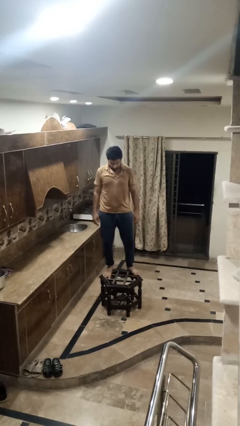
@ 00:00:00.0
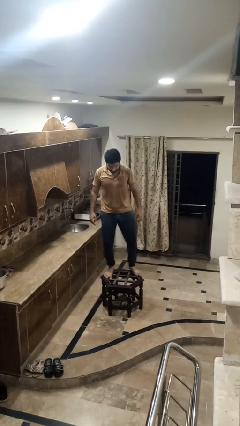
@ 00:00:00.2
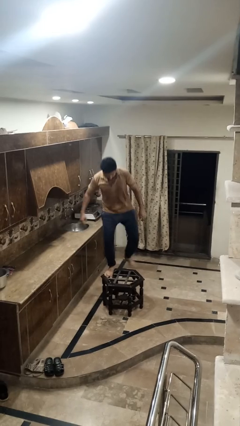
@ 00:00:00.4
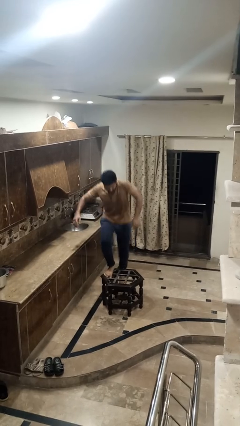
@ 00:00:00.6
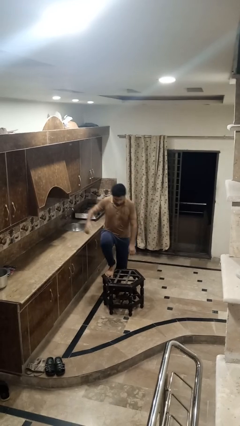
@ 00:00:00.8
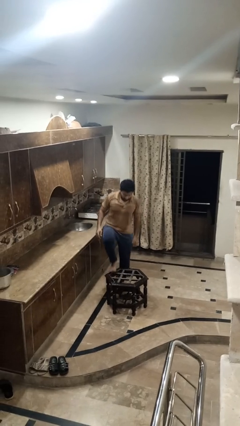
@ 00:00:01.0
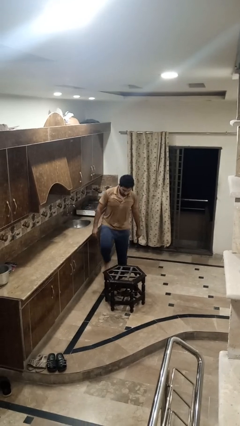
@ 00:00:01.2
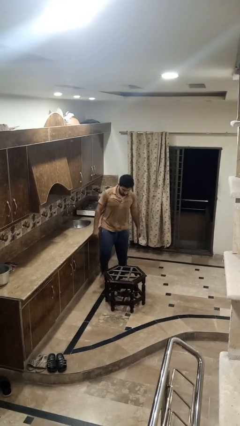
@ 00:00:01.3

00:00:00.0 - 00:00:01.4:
person climbs off table

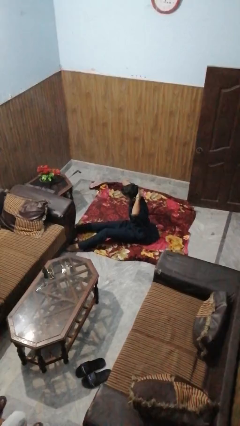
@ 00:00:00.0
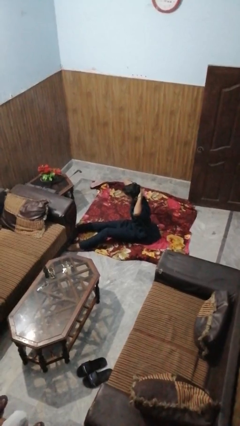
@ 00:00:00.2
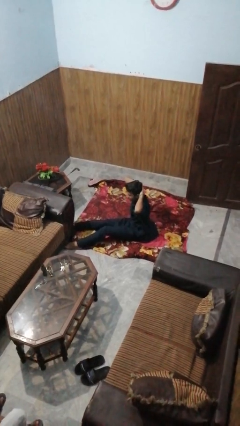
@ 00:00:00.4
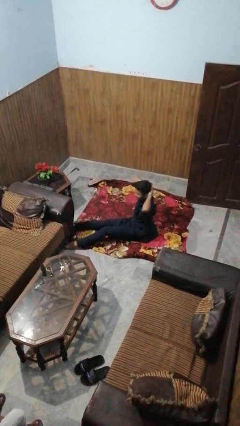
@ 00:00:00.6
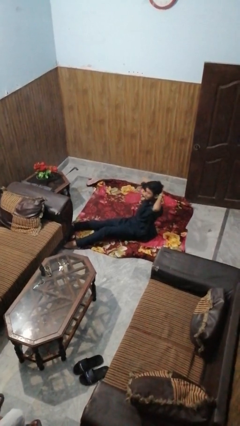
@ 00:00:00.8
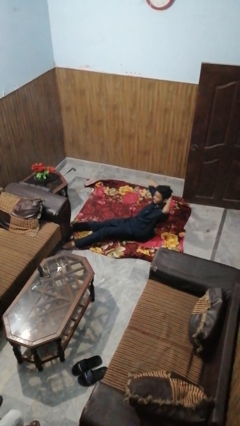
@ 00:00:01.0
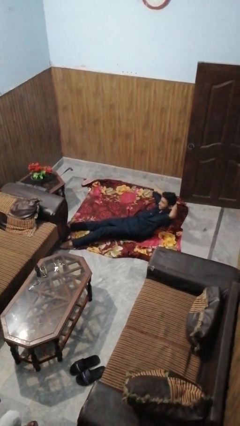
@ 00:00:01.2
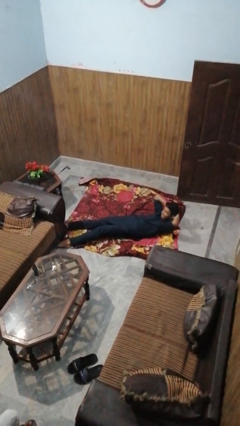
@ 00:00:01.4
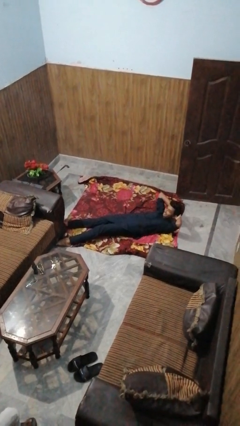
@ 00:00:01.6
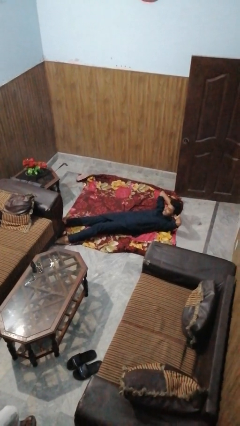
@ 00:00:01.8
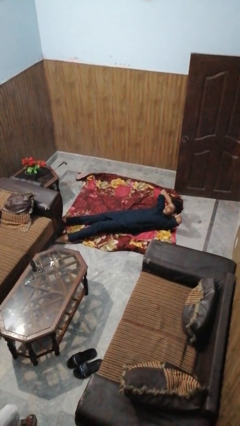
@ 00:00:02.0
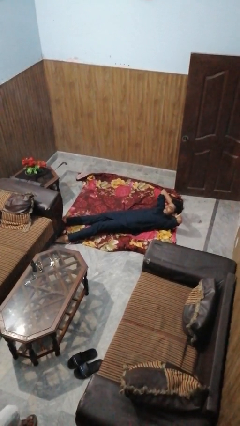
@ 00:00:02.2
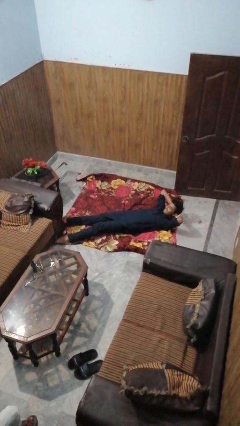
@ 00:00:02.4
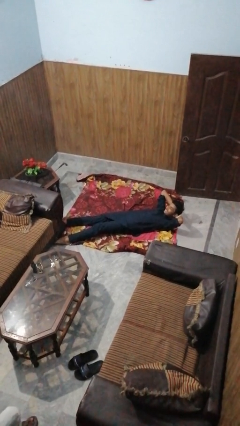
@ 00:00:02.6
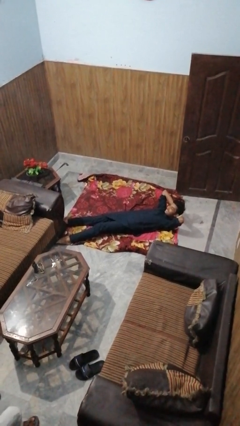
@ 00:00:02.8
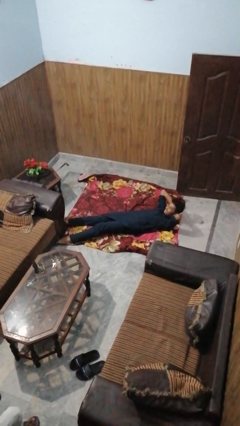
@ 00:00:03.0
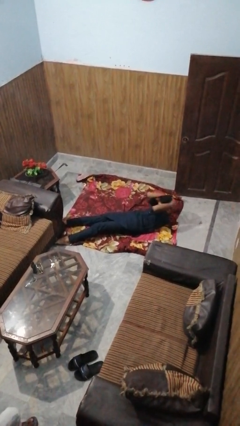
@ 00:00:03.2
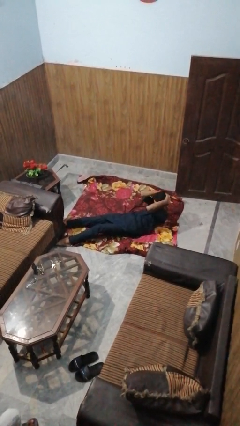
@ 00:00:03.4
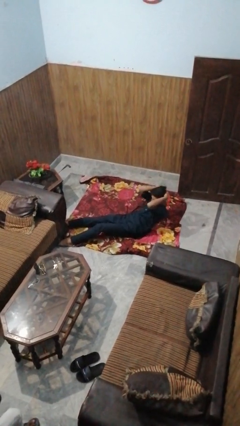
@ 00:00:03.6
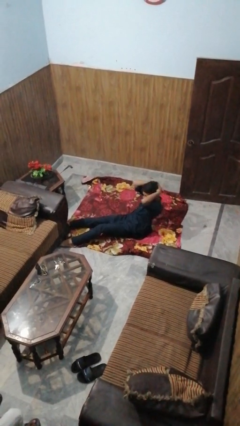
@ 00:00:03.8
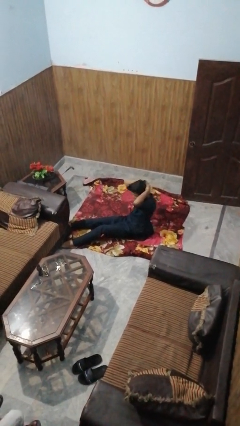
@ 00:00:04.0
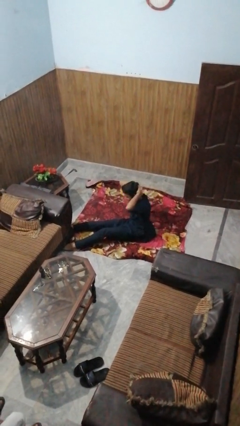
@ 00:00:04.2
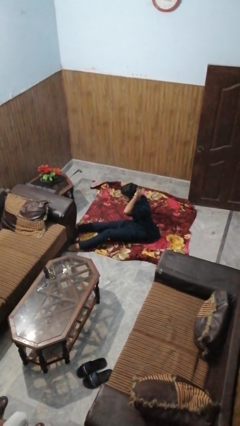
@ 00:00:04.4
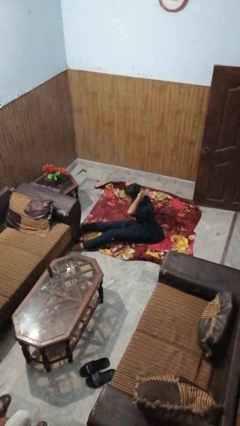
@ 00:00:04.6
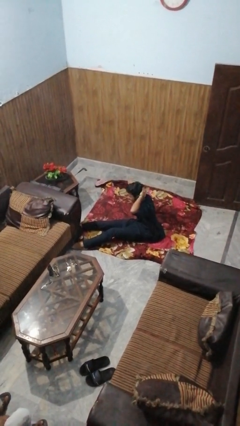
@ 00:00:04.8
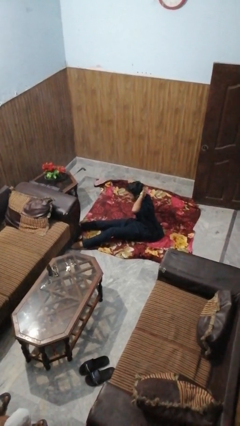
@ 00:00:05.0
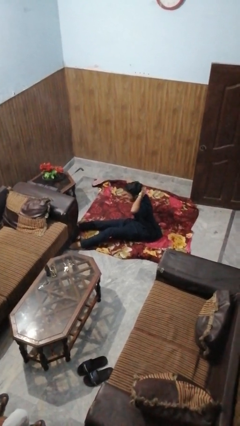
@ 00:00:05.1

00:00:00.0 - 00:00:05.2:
person exercises with situp

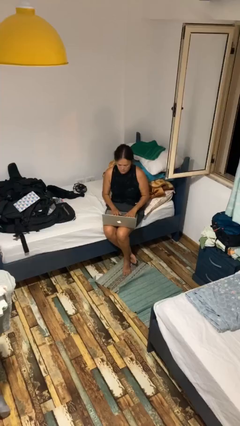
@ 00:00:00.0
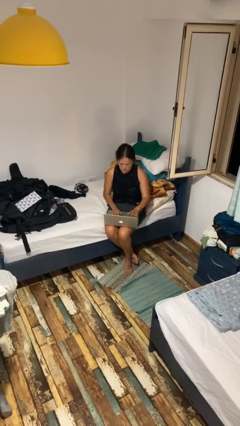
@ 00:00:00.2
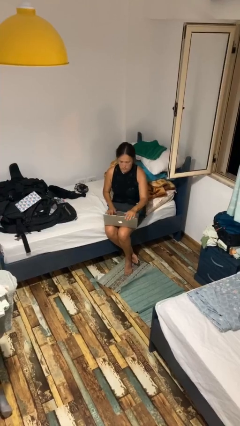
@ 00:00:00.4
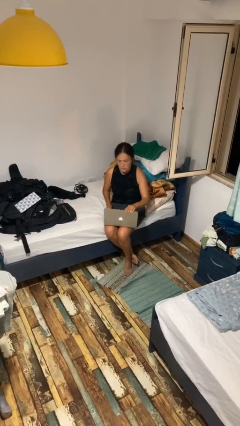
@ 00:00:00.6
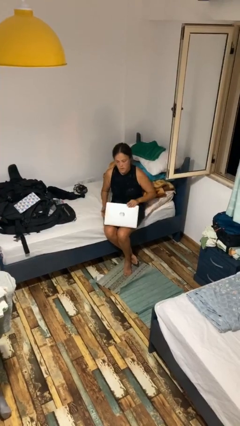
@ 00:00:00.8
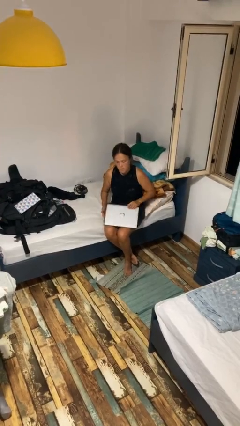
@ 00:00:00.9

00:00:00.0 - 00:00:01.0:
person closes laptop

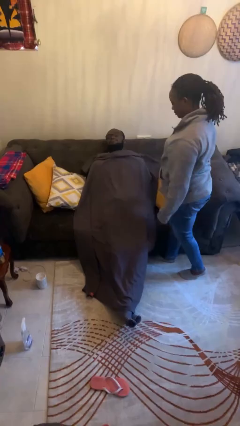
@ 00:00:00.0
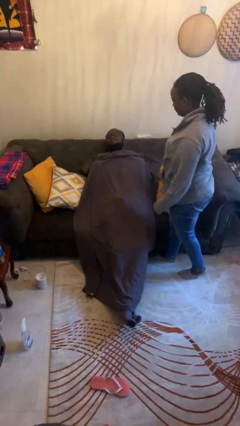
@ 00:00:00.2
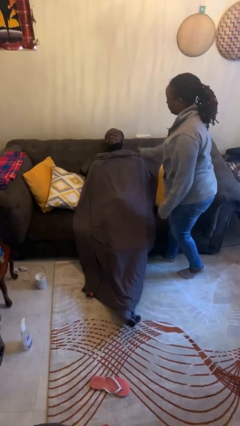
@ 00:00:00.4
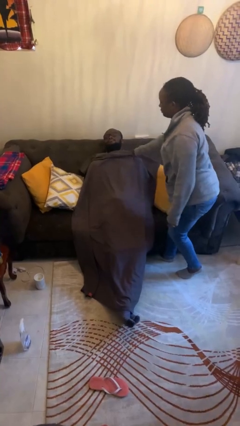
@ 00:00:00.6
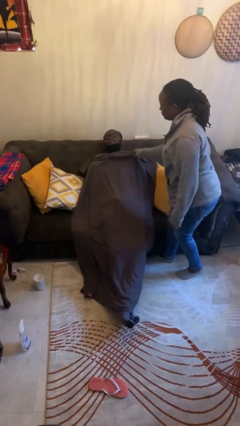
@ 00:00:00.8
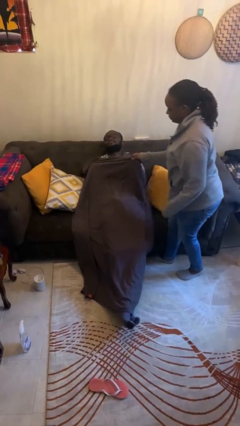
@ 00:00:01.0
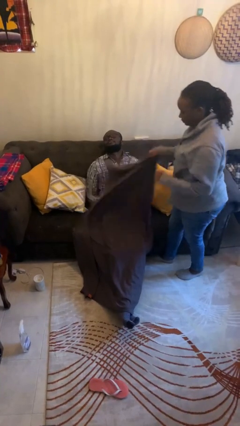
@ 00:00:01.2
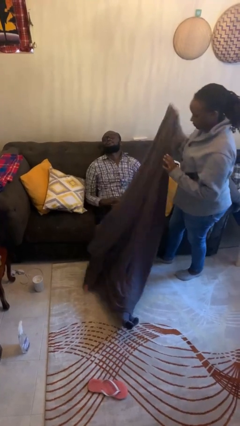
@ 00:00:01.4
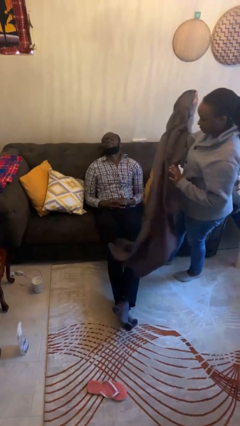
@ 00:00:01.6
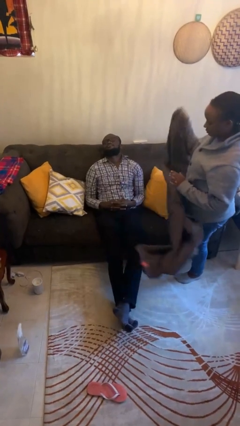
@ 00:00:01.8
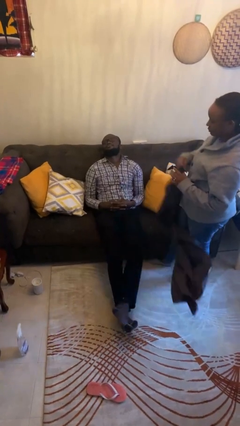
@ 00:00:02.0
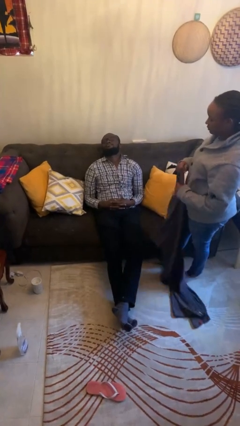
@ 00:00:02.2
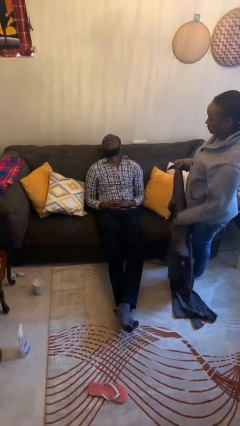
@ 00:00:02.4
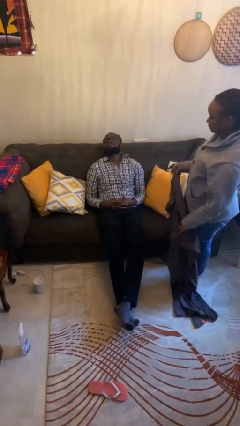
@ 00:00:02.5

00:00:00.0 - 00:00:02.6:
person uncovers friend with blanket

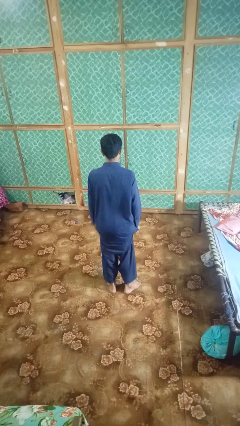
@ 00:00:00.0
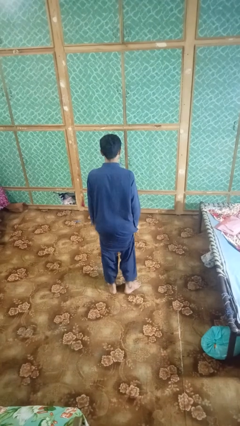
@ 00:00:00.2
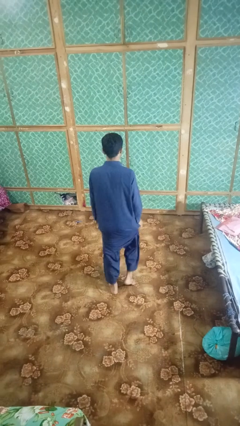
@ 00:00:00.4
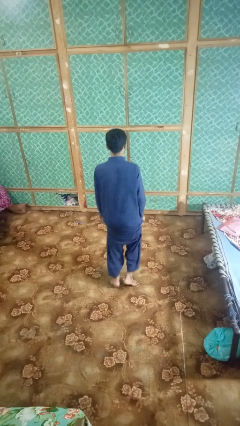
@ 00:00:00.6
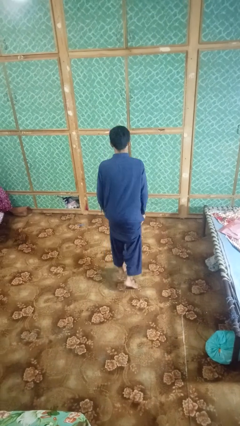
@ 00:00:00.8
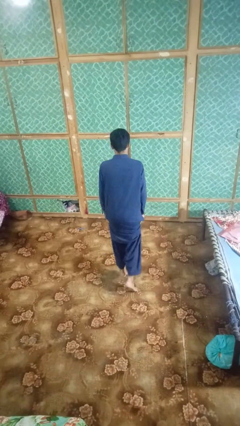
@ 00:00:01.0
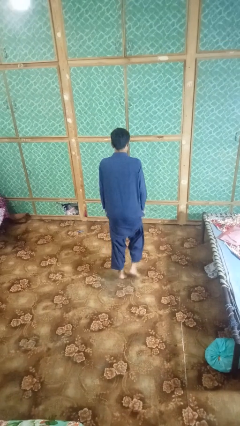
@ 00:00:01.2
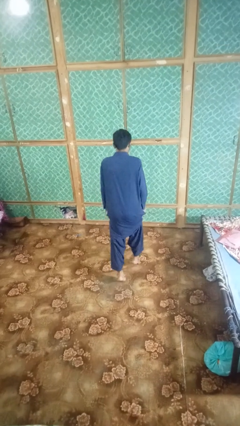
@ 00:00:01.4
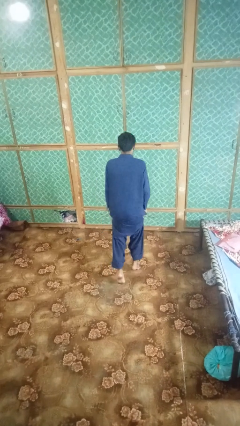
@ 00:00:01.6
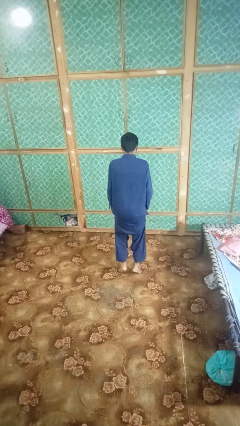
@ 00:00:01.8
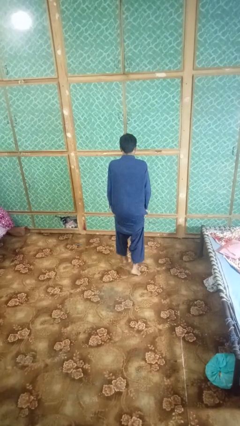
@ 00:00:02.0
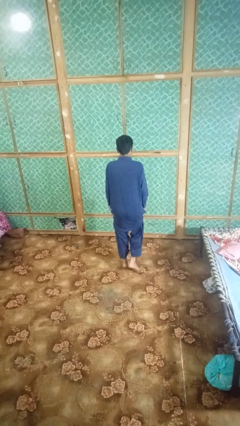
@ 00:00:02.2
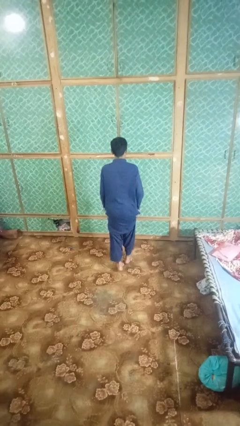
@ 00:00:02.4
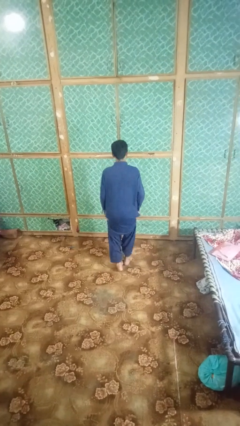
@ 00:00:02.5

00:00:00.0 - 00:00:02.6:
person walks tiptoe

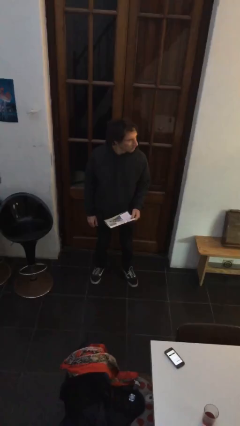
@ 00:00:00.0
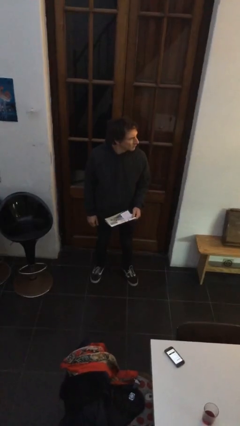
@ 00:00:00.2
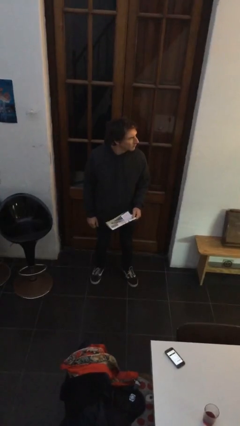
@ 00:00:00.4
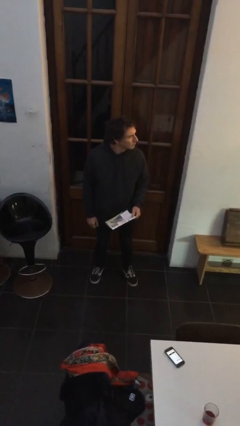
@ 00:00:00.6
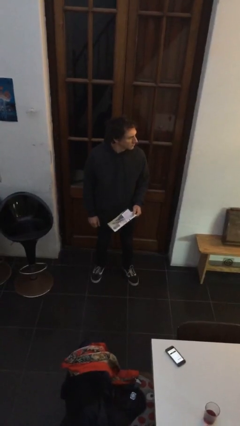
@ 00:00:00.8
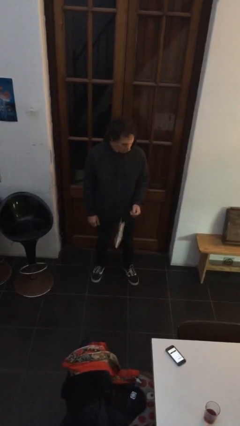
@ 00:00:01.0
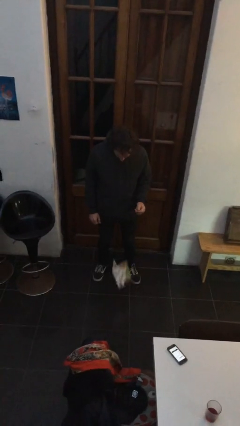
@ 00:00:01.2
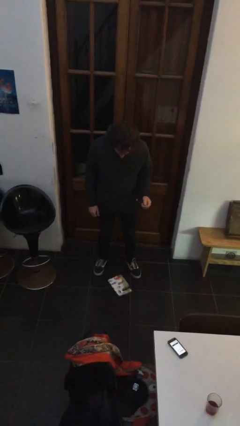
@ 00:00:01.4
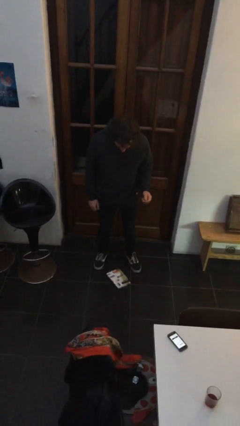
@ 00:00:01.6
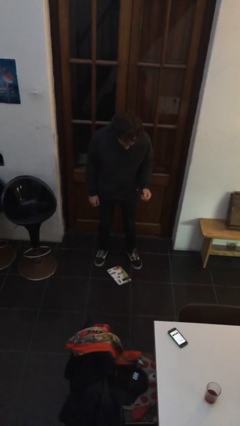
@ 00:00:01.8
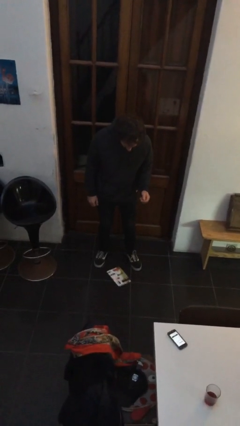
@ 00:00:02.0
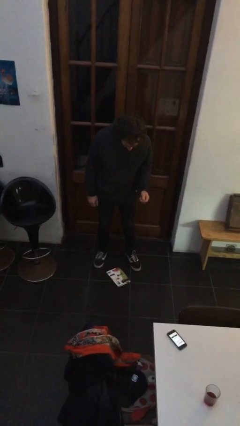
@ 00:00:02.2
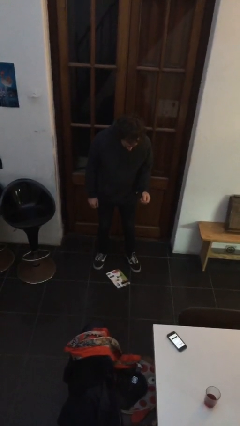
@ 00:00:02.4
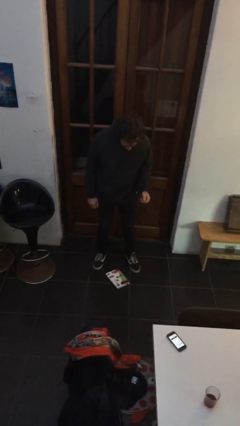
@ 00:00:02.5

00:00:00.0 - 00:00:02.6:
person drops object

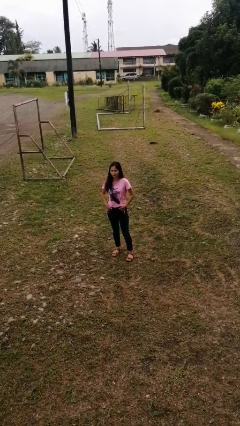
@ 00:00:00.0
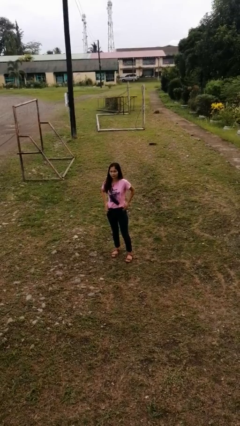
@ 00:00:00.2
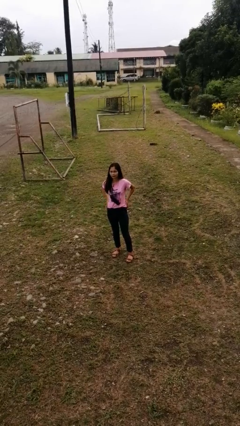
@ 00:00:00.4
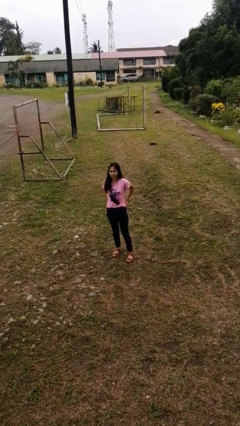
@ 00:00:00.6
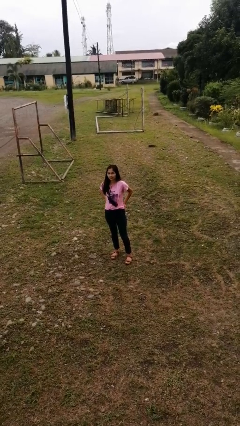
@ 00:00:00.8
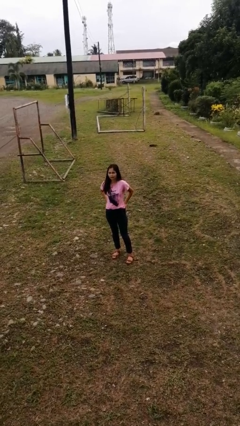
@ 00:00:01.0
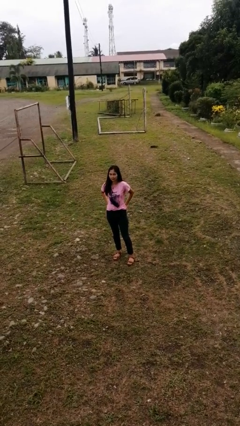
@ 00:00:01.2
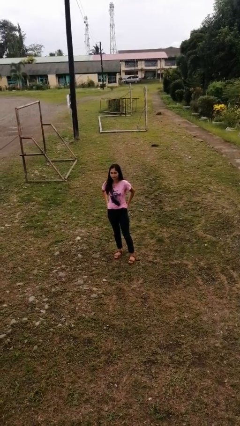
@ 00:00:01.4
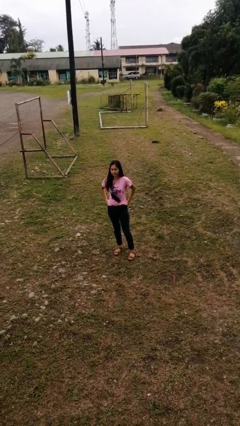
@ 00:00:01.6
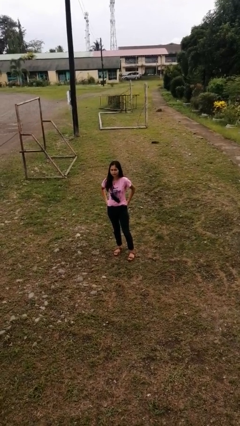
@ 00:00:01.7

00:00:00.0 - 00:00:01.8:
person puts hands in back pockets
